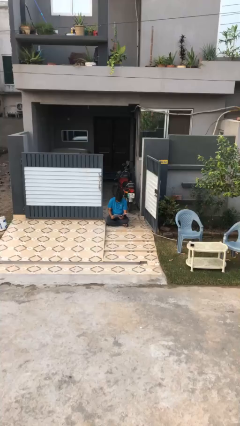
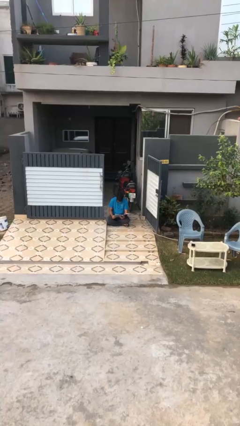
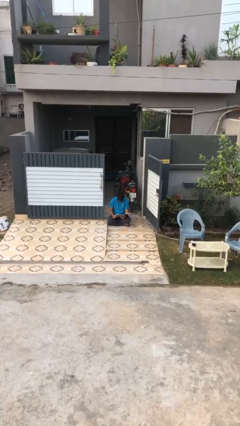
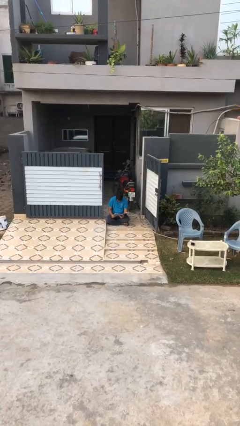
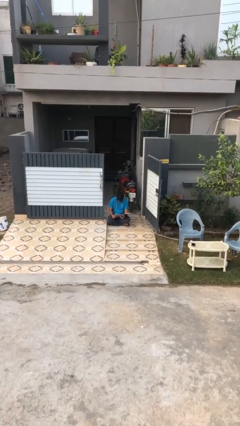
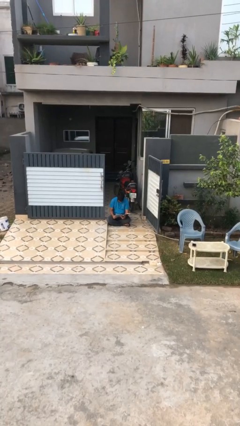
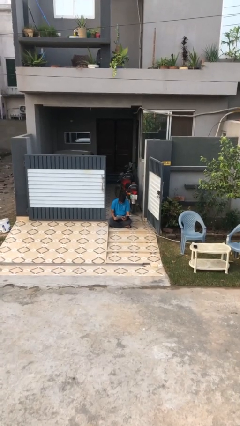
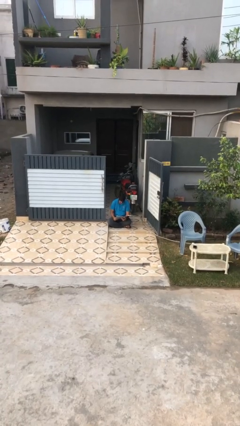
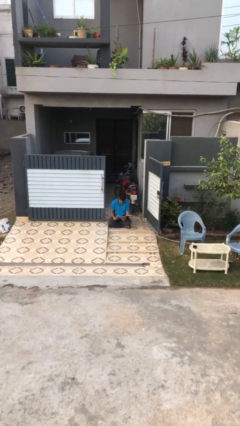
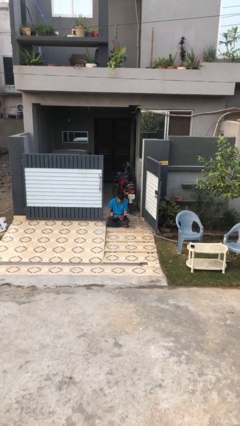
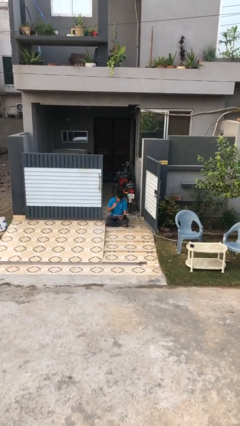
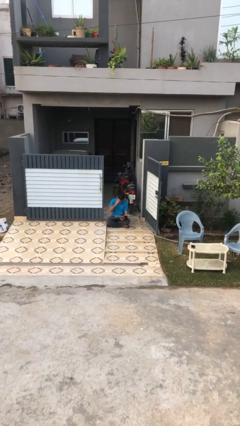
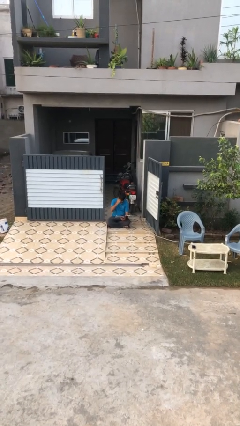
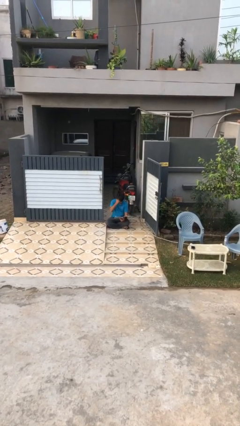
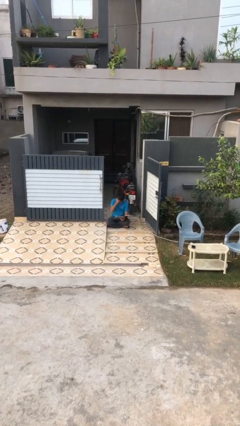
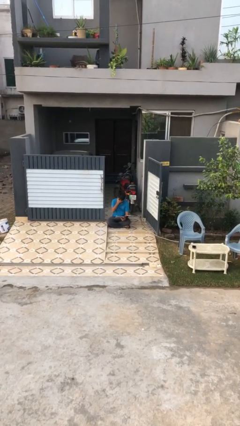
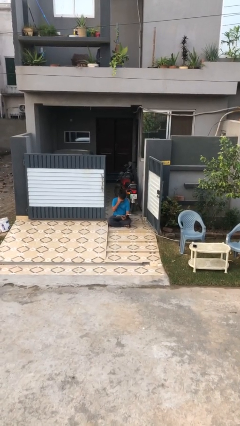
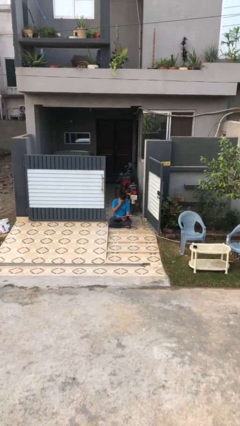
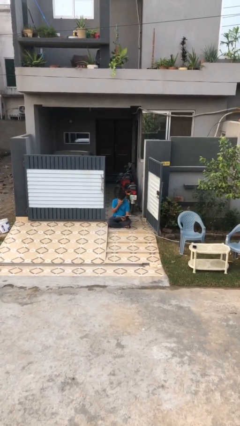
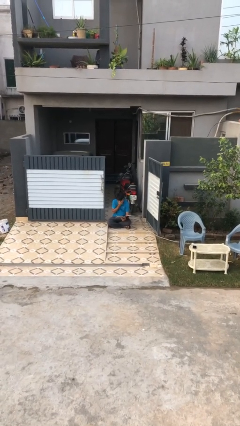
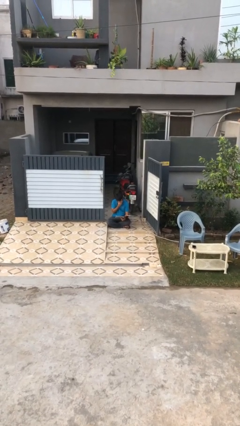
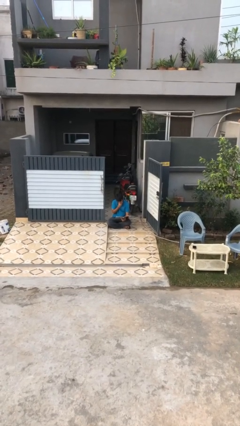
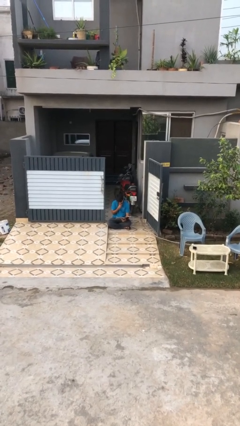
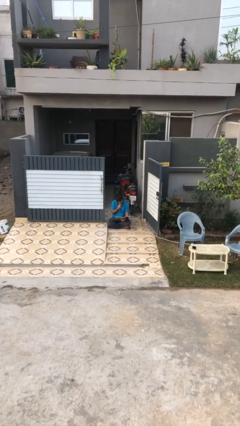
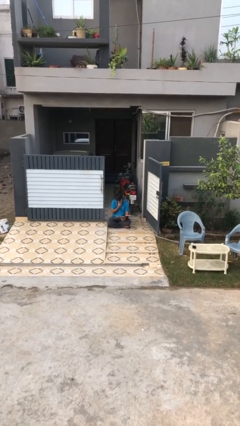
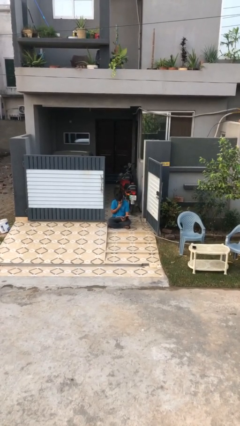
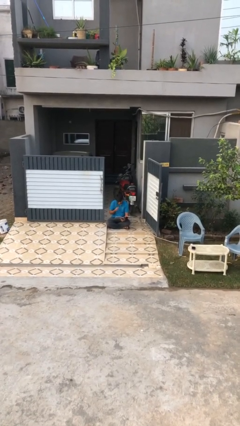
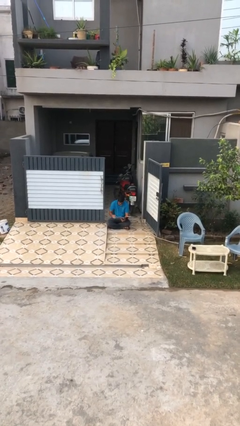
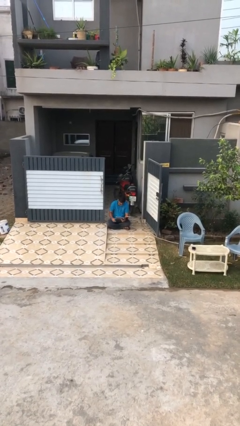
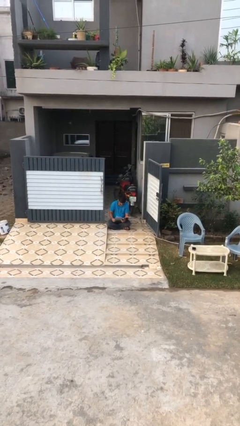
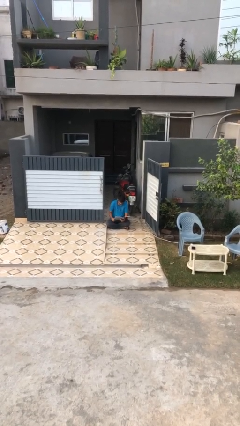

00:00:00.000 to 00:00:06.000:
person reads document

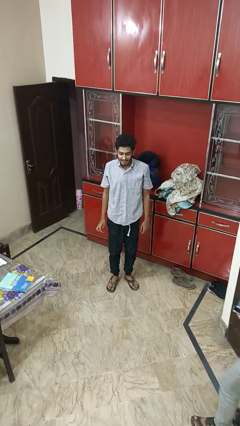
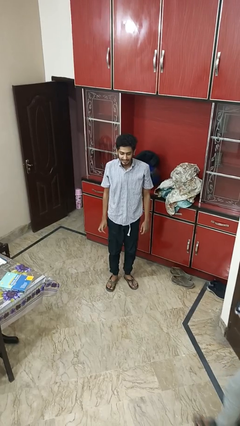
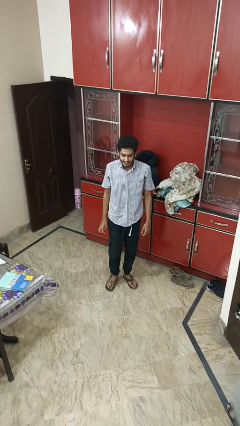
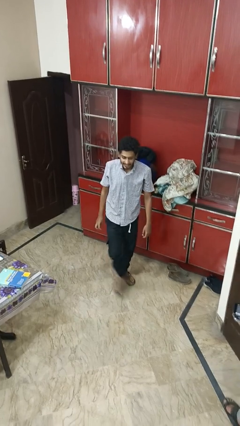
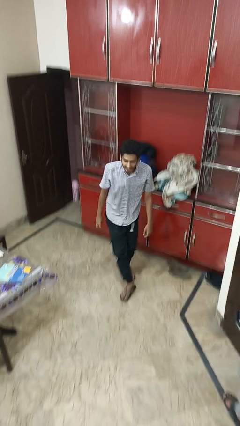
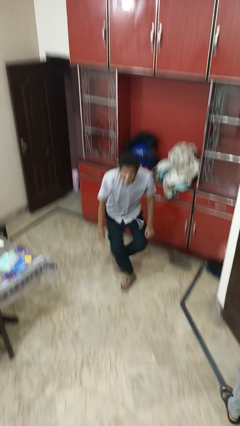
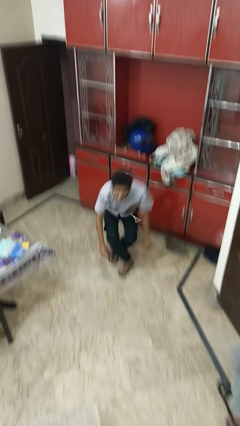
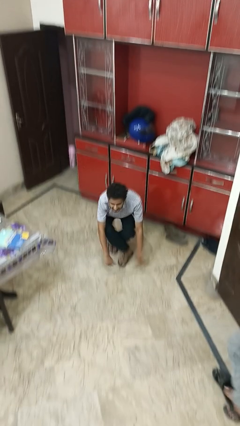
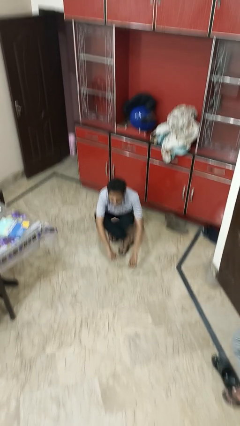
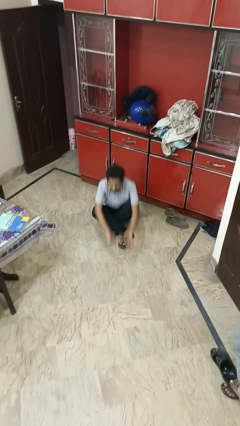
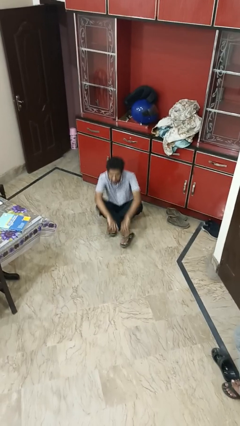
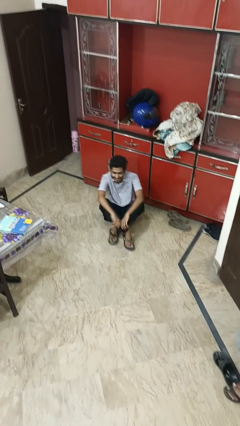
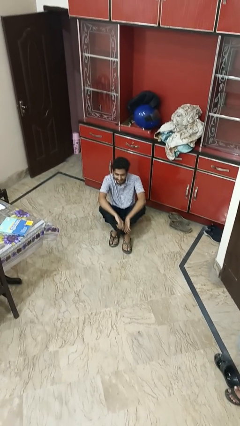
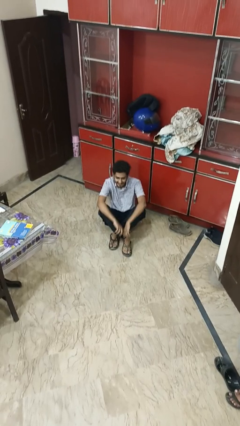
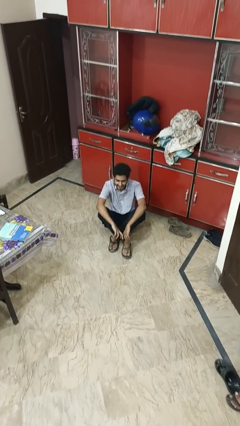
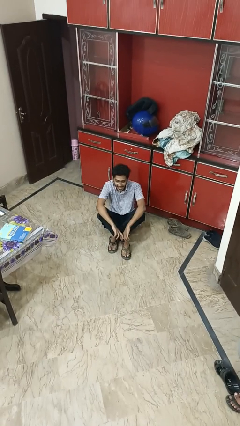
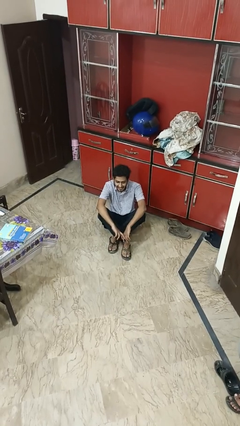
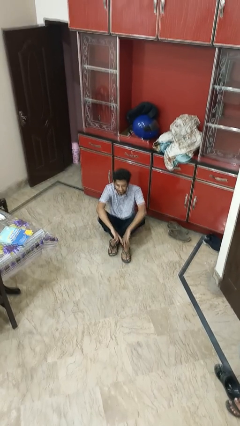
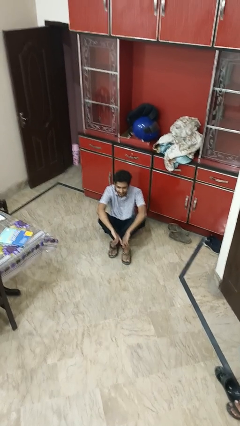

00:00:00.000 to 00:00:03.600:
person sits crisscross

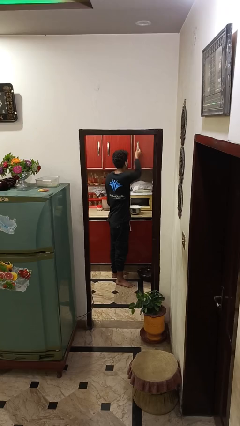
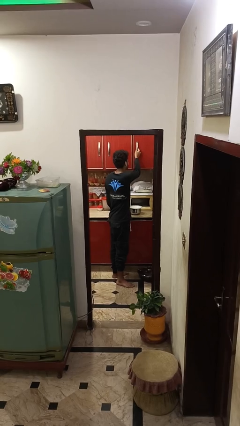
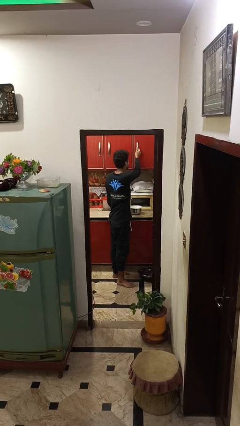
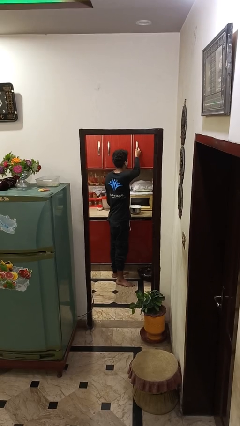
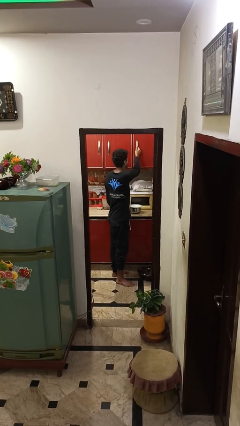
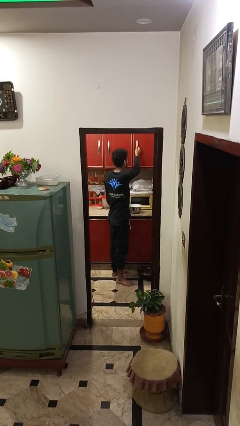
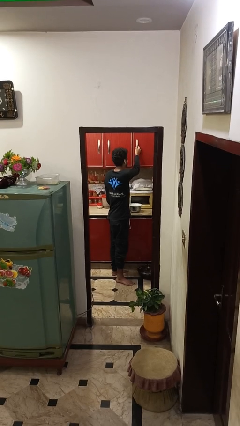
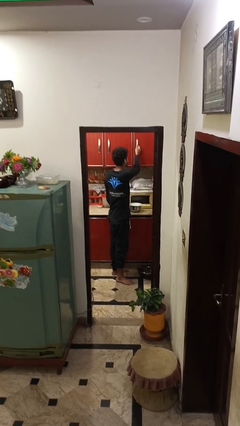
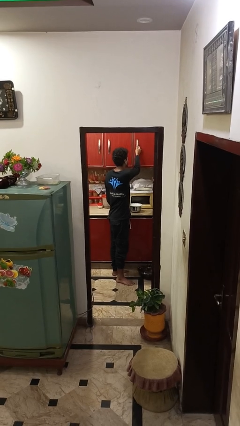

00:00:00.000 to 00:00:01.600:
person closes cabinet

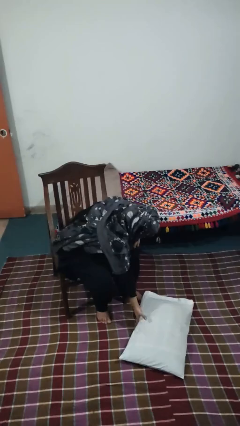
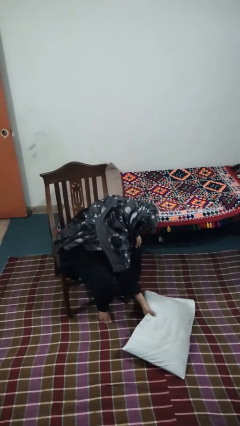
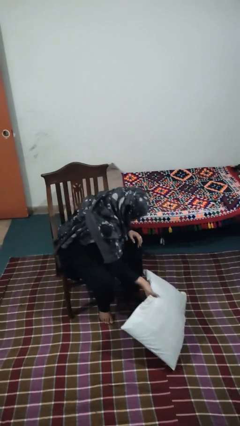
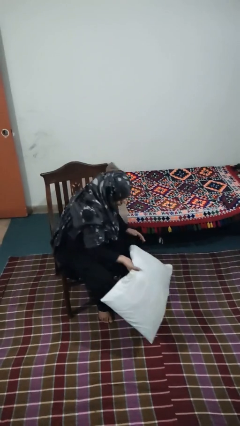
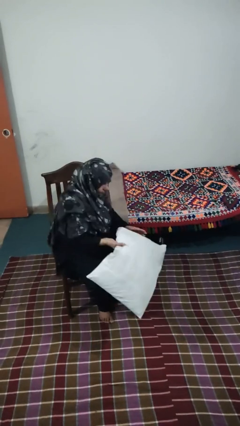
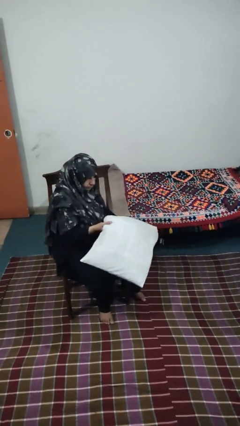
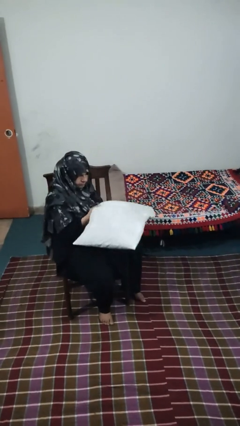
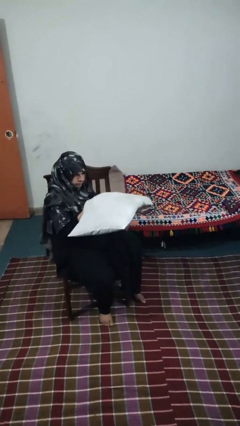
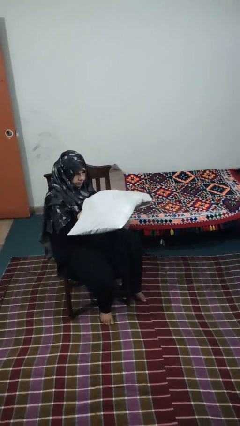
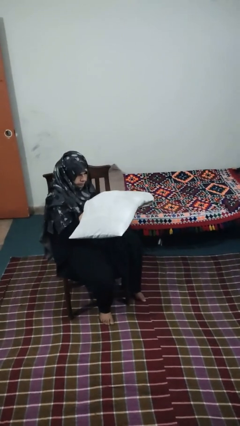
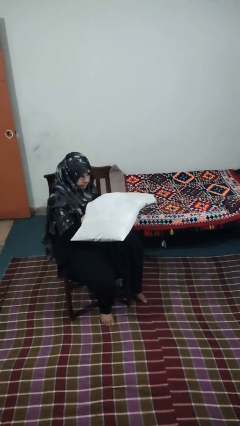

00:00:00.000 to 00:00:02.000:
person picks up object from floor

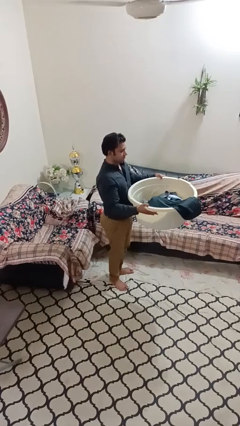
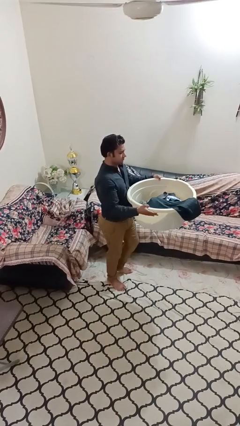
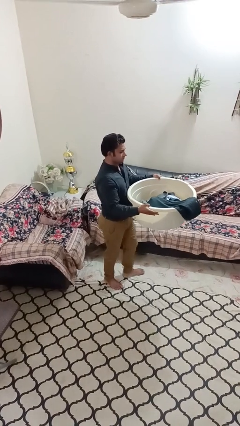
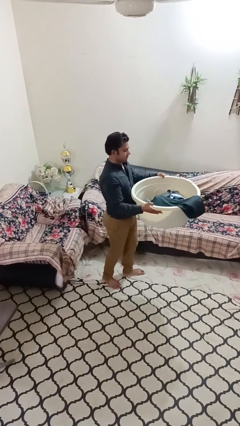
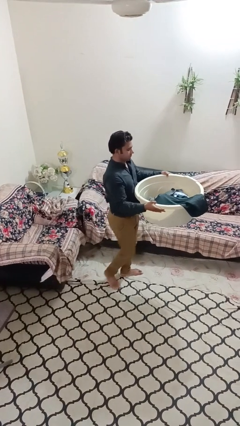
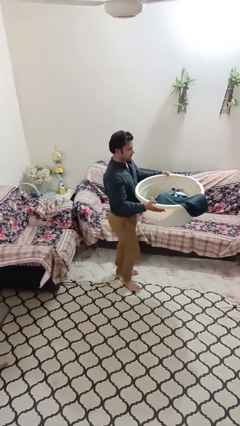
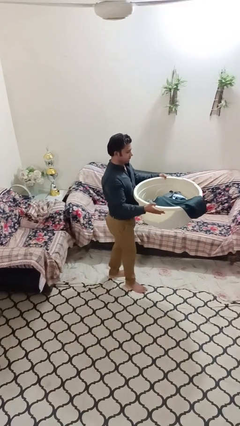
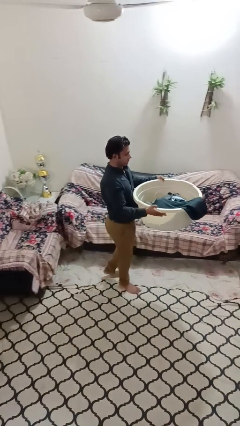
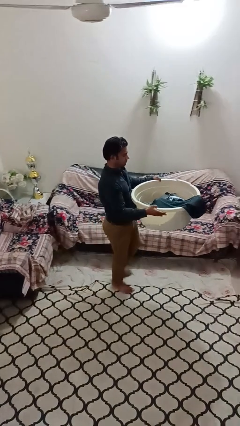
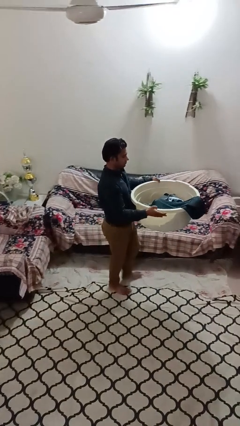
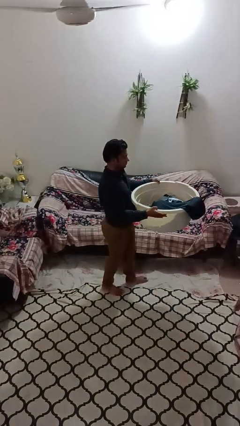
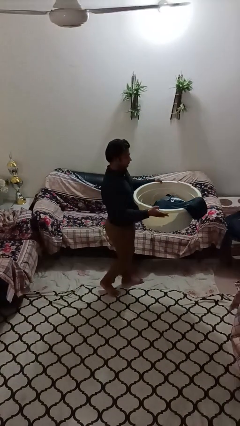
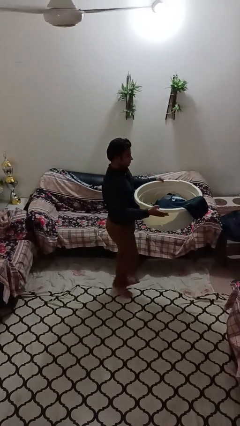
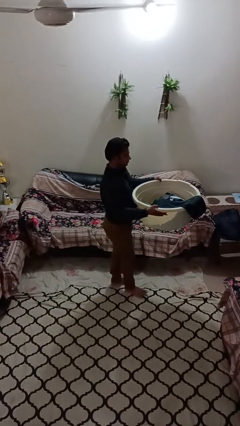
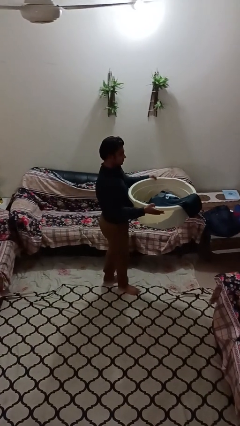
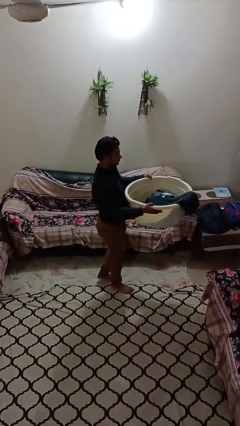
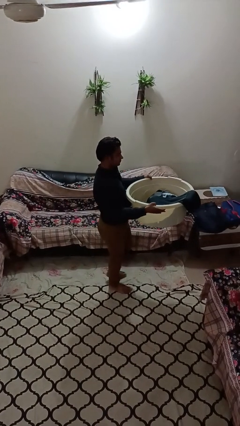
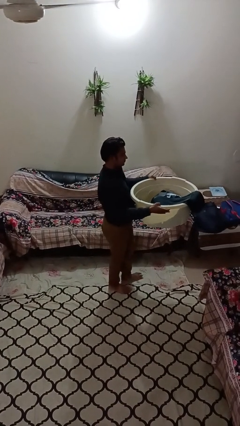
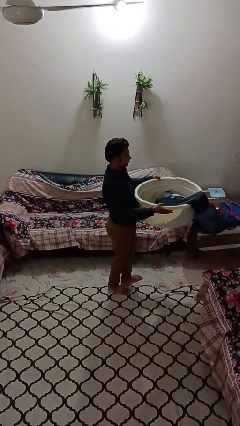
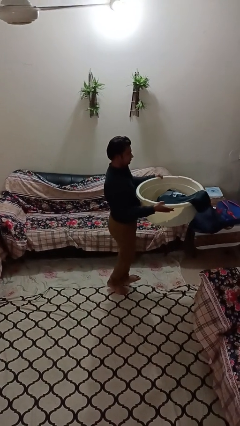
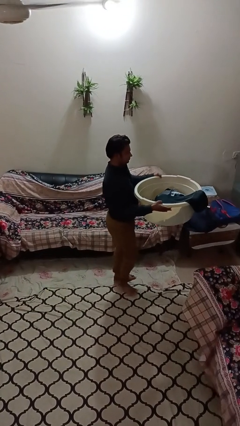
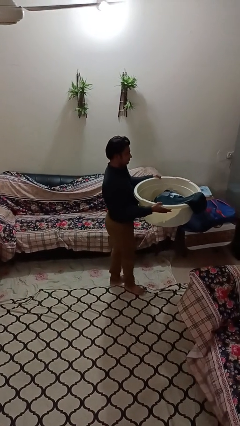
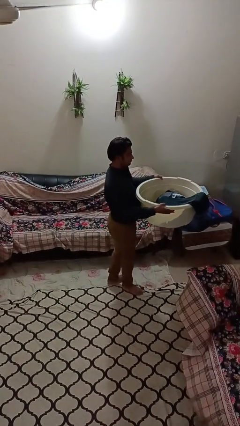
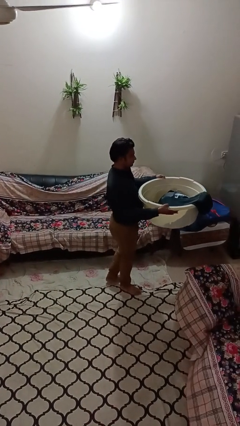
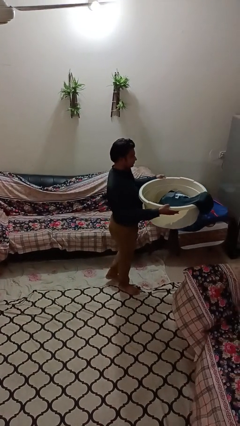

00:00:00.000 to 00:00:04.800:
person carries laundry basket
